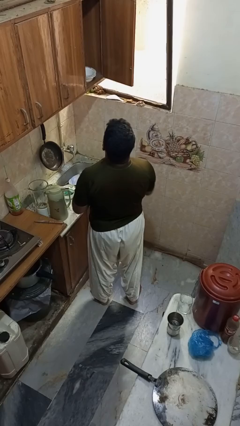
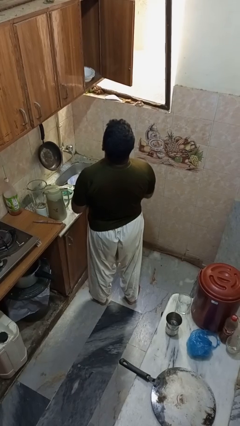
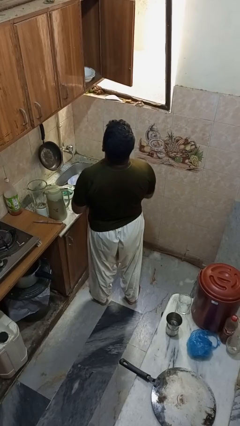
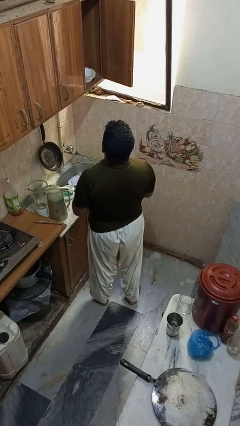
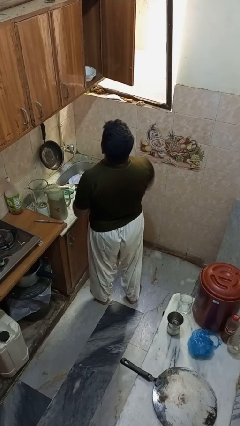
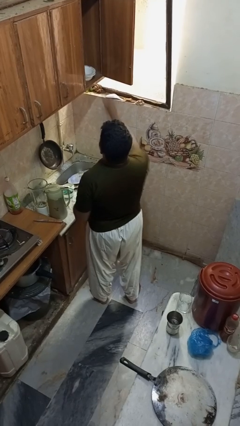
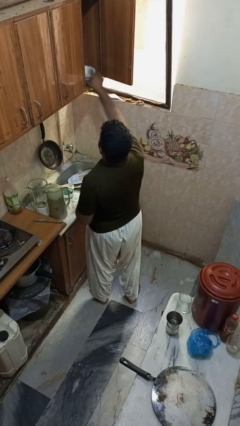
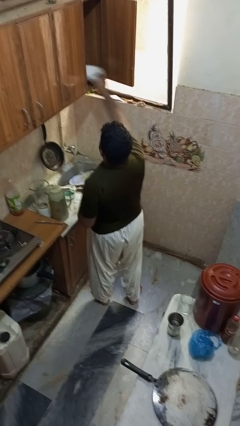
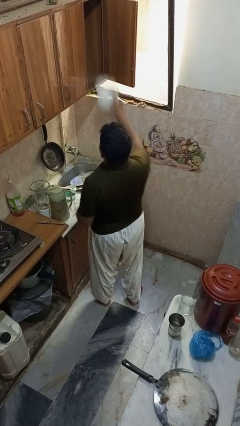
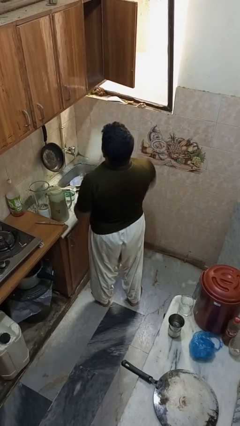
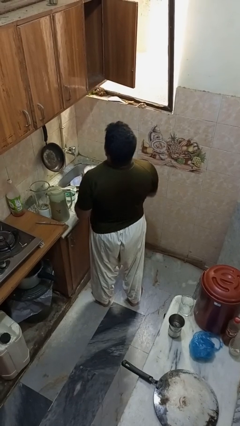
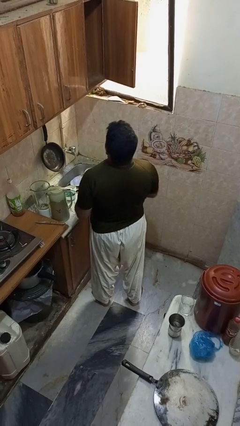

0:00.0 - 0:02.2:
person takes object from cabinet

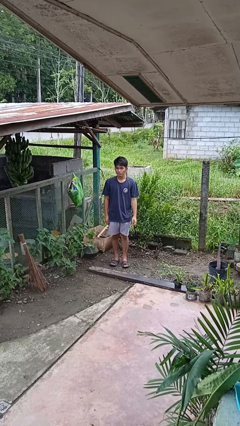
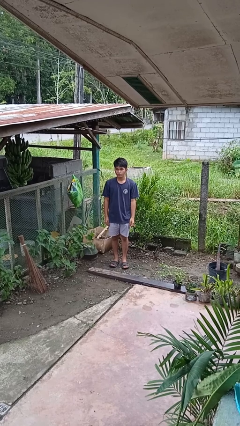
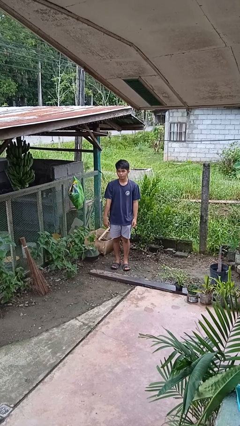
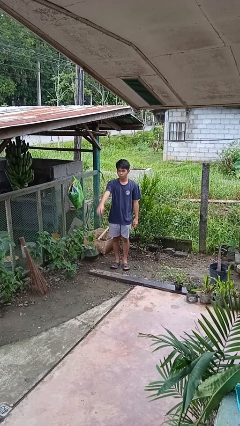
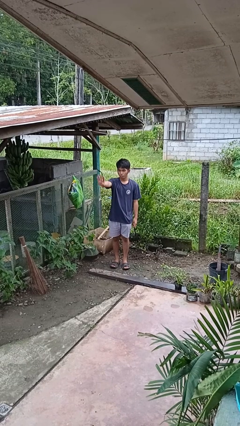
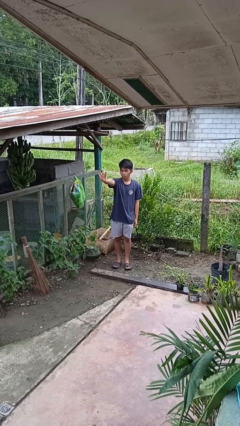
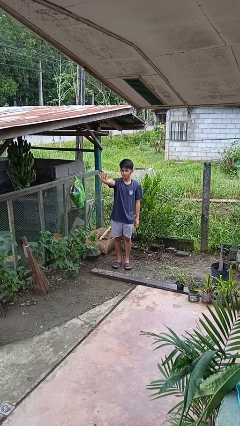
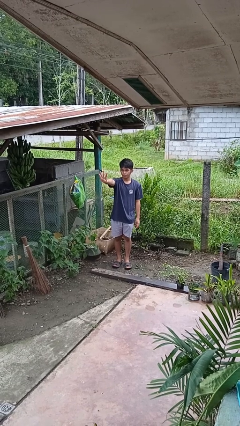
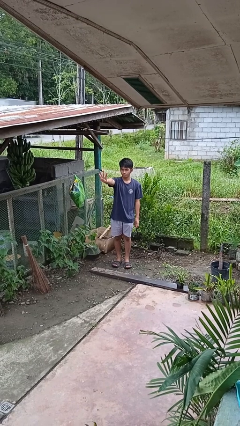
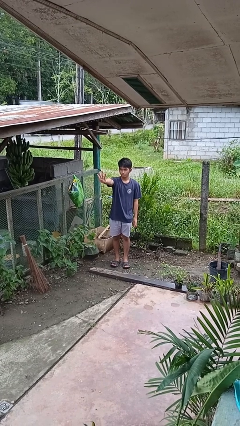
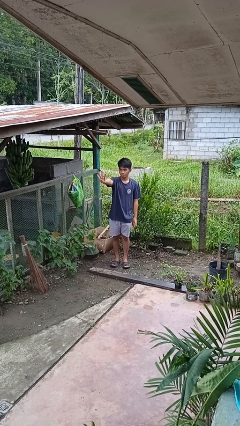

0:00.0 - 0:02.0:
person gestures number four

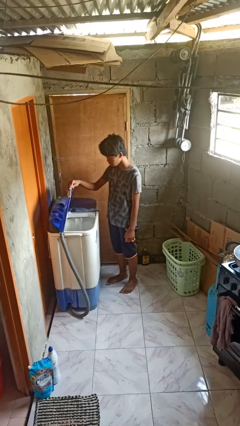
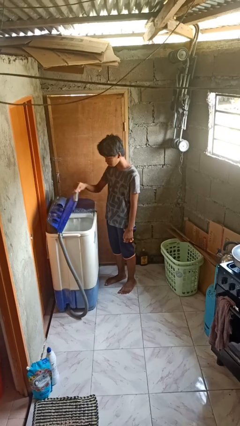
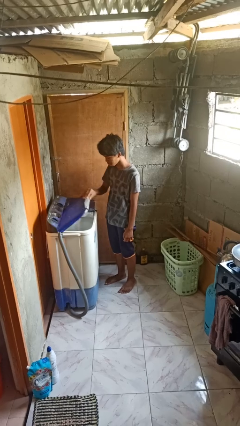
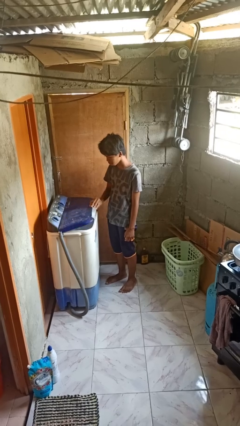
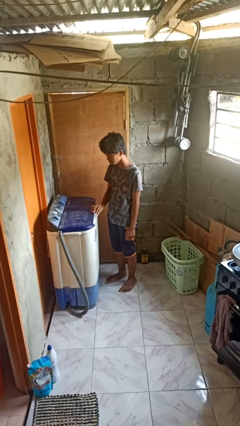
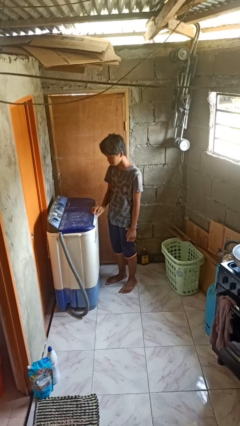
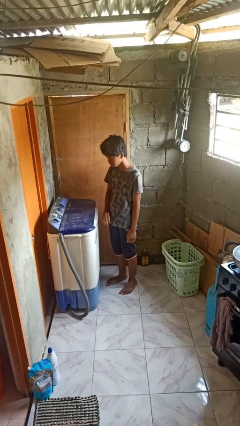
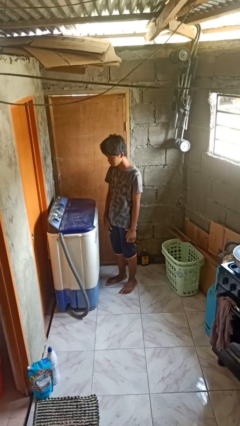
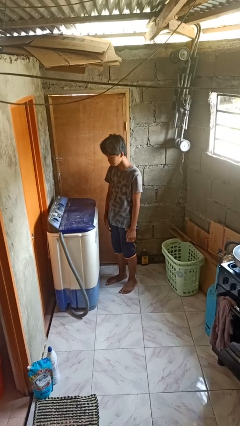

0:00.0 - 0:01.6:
person closes clothes washer

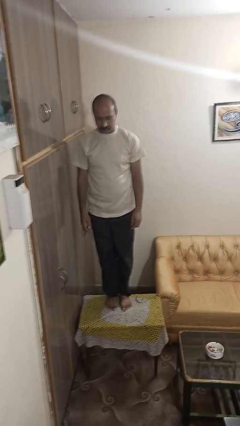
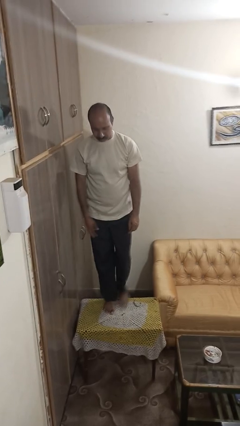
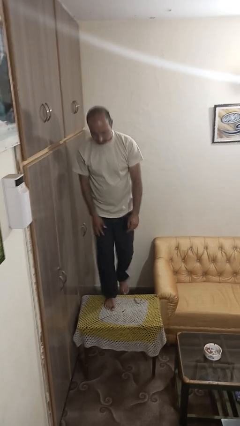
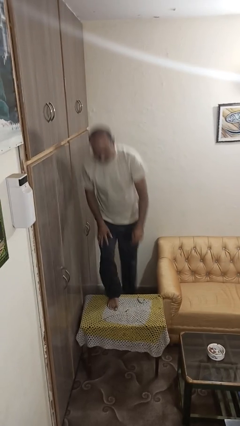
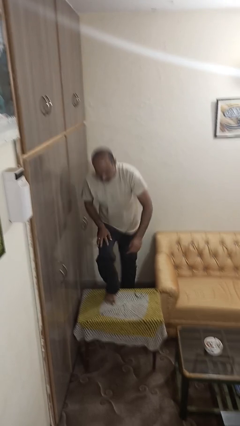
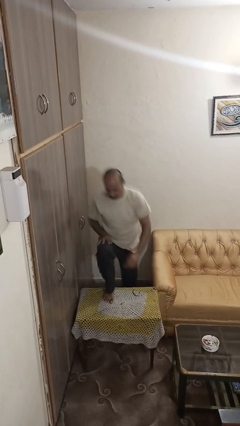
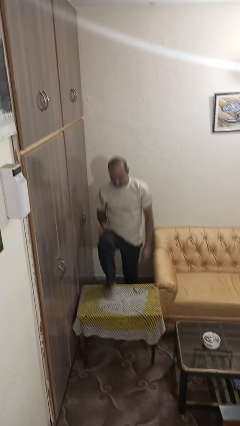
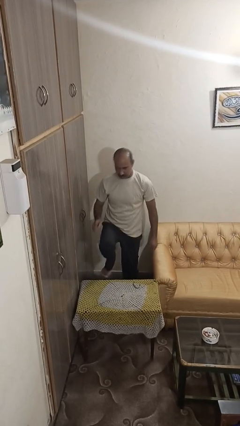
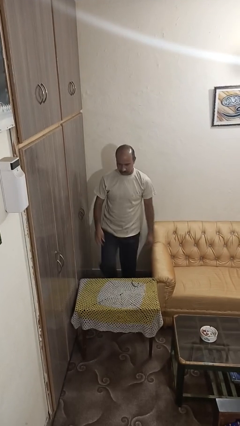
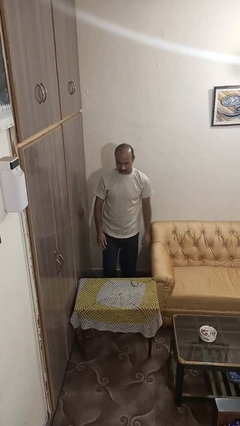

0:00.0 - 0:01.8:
person climbs off table

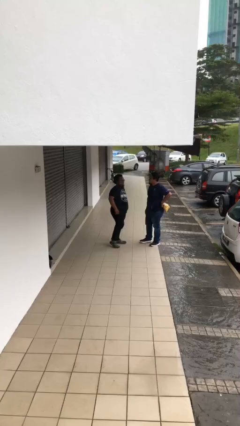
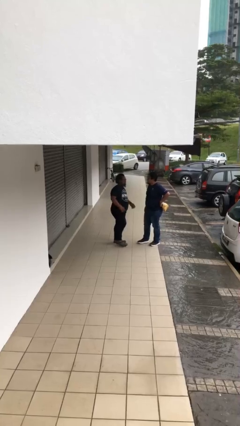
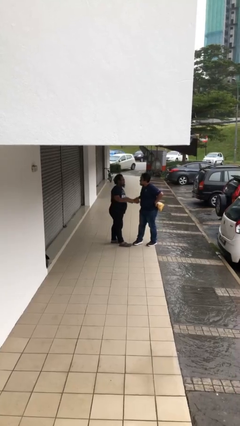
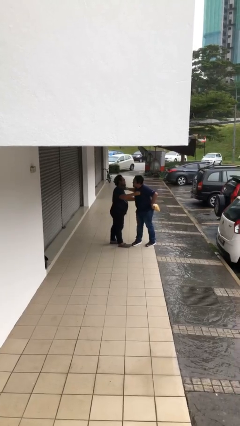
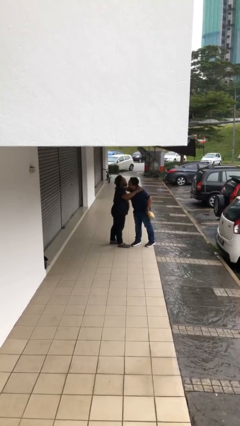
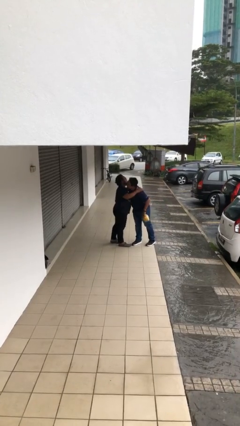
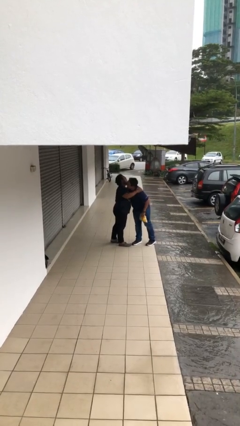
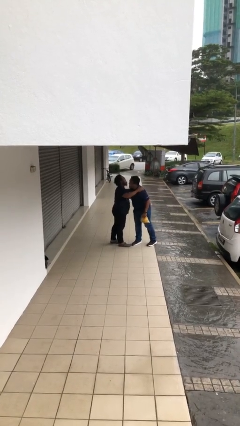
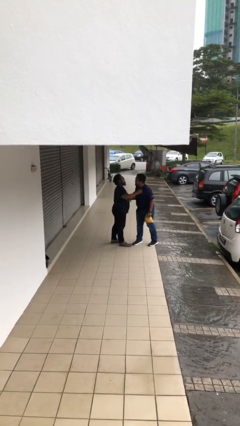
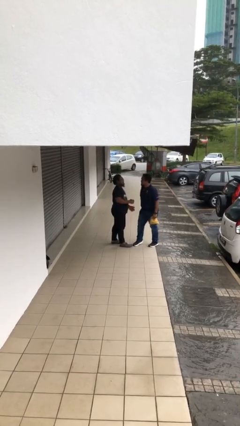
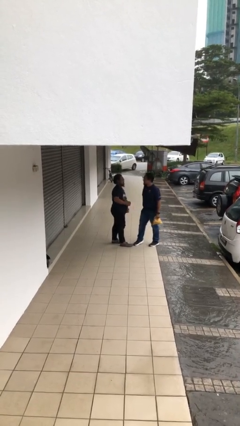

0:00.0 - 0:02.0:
person embraces person

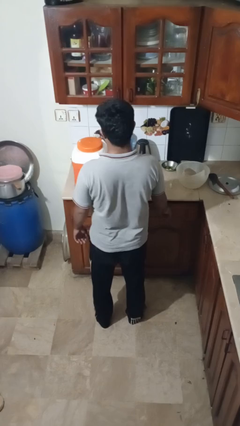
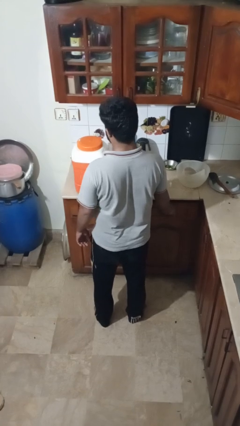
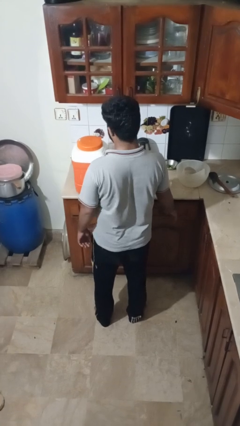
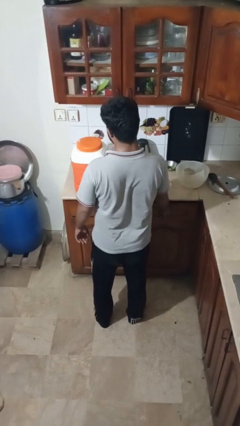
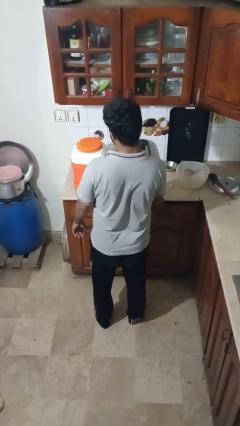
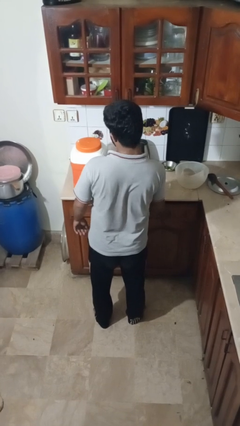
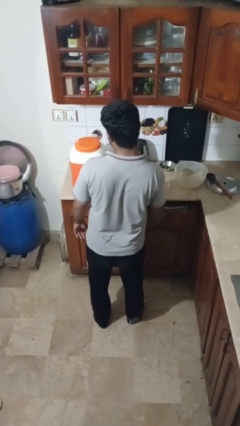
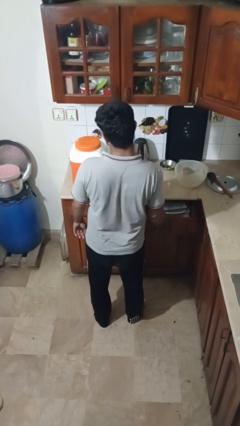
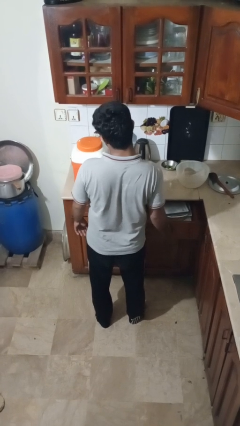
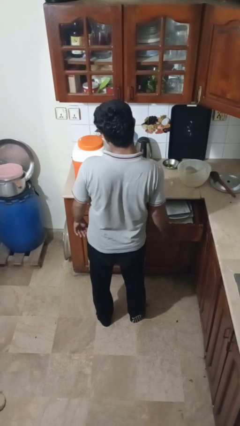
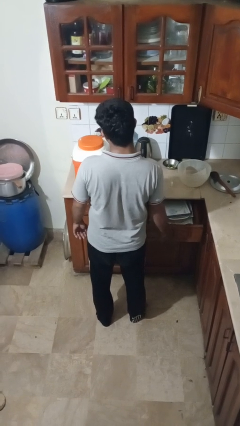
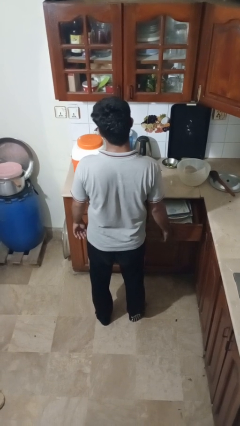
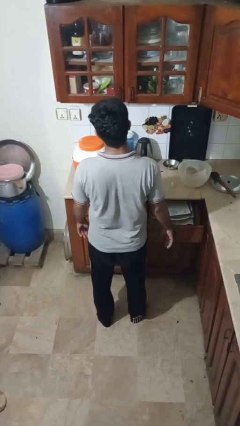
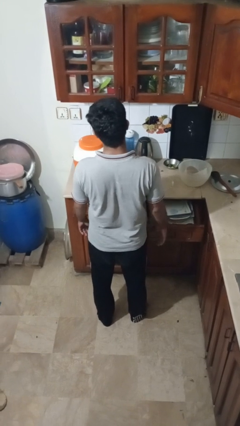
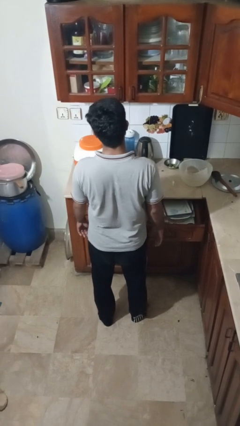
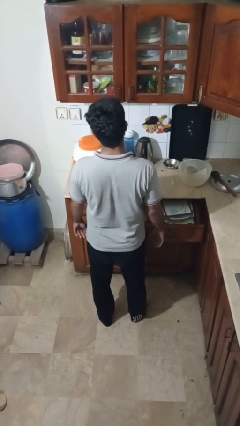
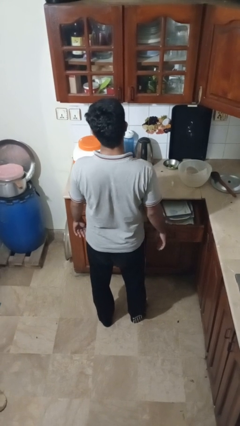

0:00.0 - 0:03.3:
person opens kitchen drawer

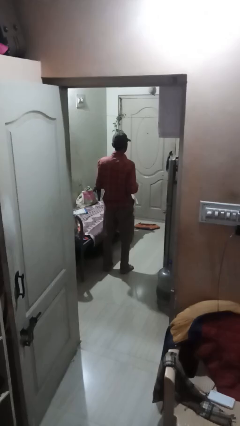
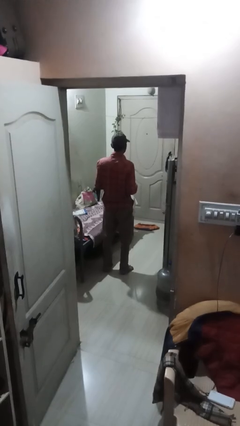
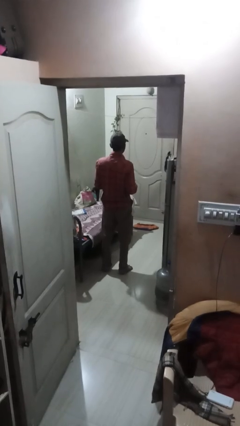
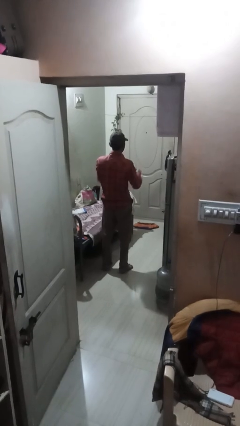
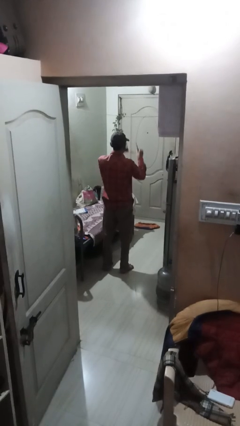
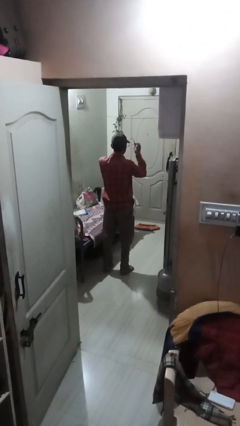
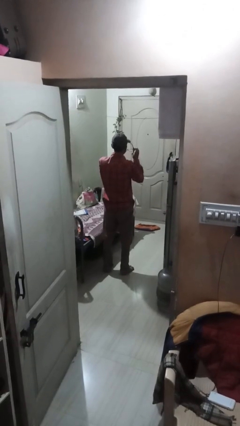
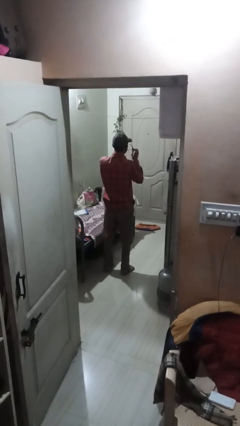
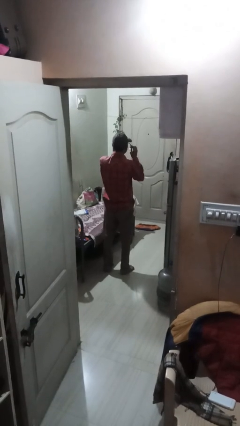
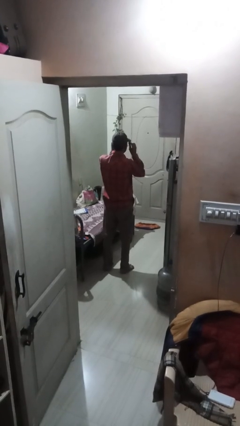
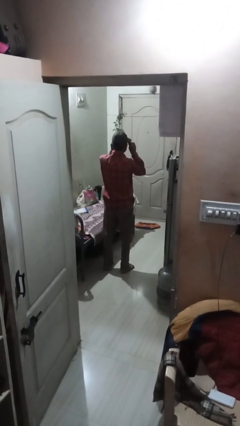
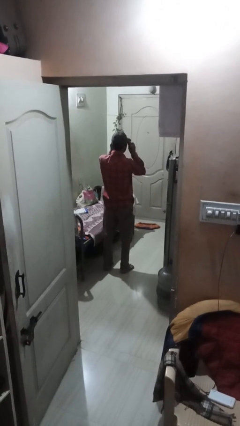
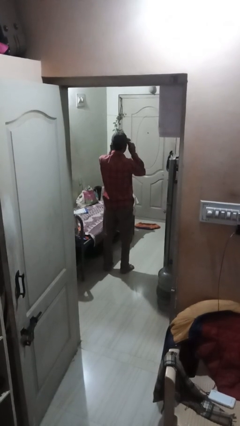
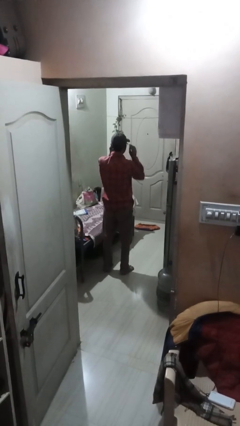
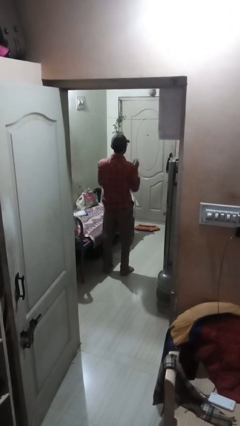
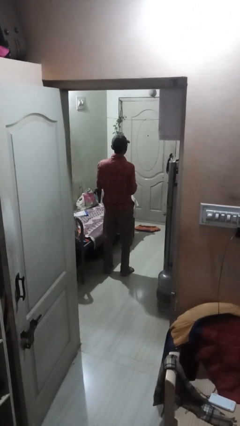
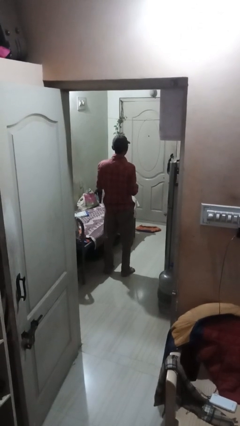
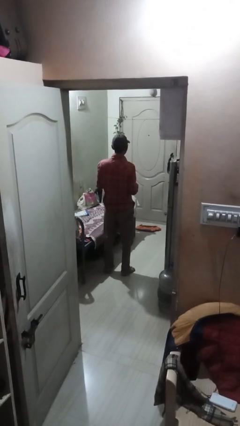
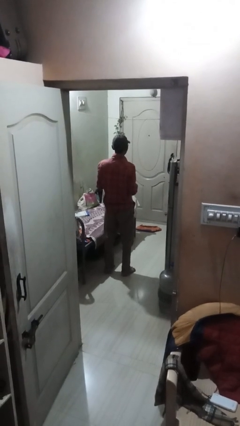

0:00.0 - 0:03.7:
person puts on glasses

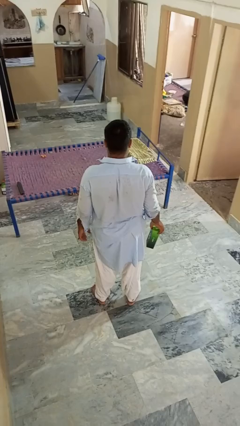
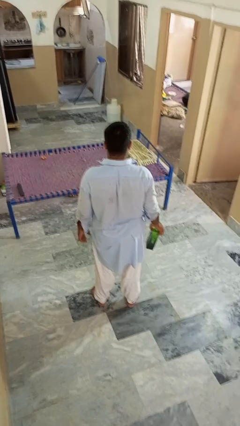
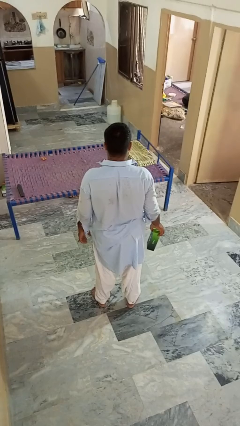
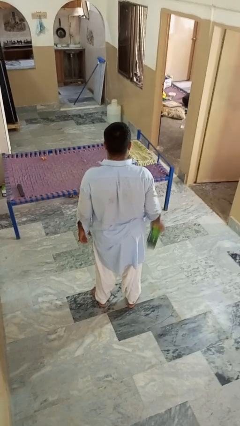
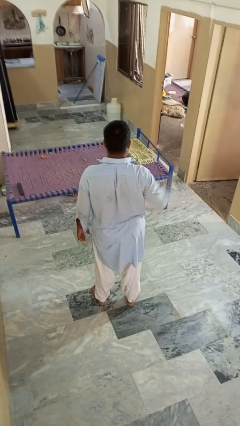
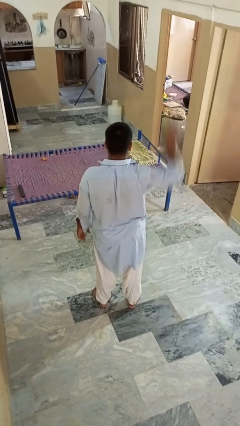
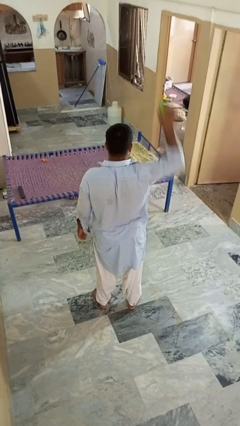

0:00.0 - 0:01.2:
person drops object
